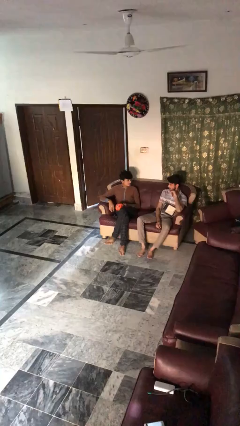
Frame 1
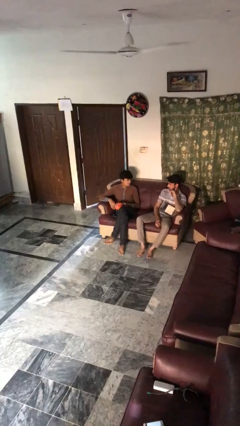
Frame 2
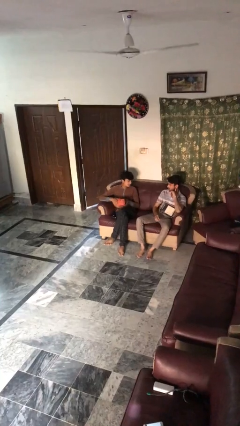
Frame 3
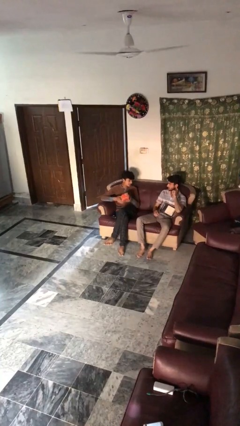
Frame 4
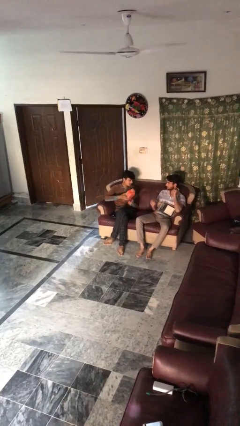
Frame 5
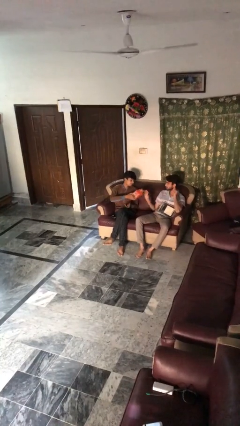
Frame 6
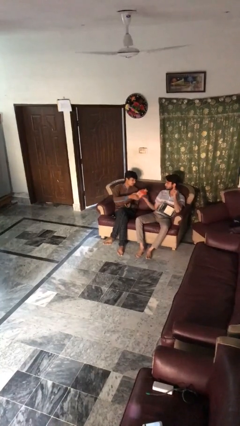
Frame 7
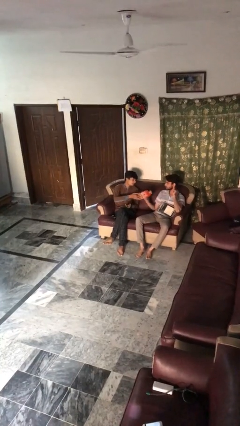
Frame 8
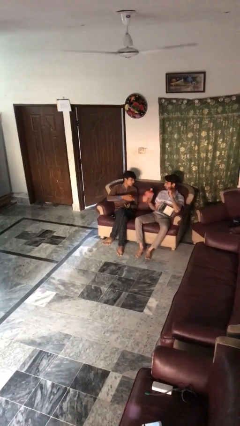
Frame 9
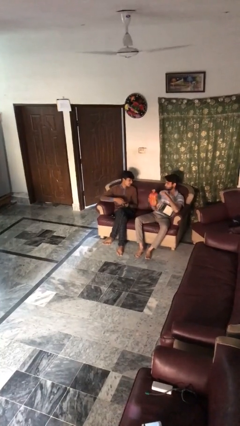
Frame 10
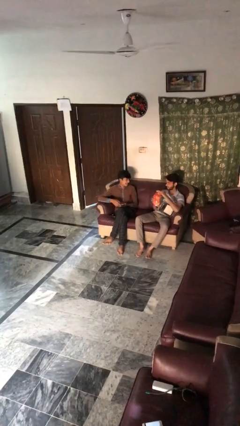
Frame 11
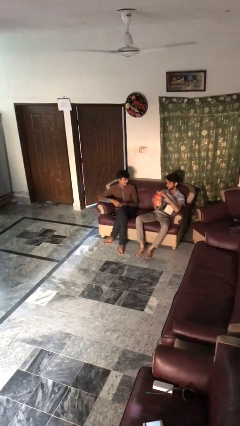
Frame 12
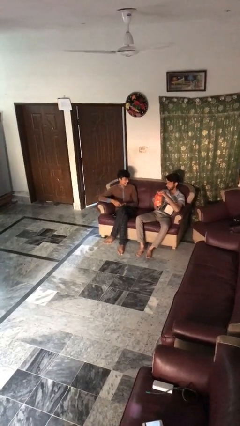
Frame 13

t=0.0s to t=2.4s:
person transfers object to person

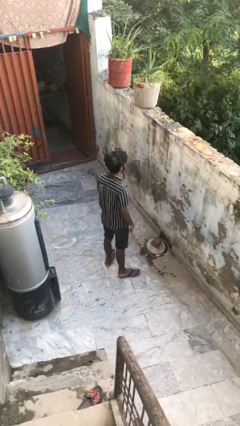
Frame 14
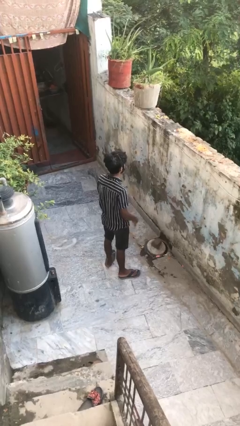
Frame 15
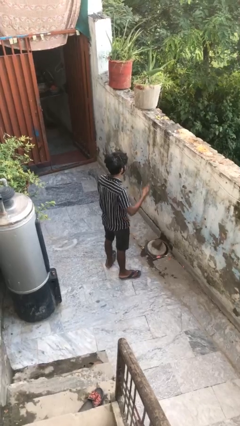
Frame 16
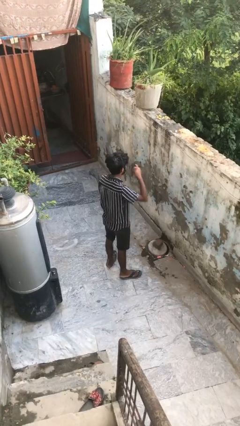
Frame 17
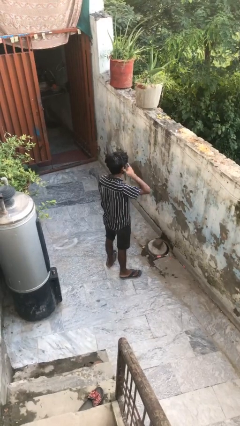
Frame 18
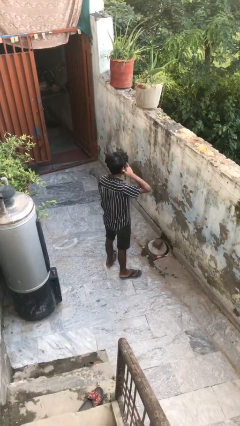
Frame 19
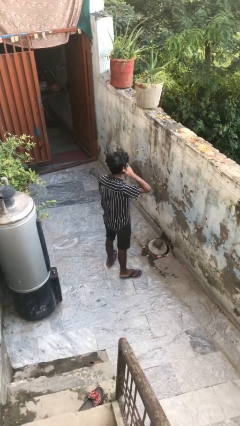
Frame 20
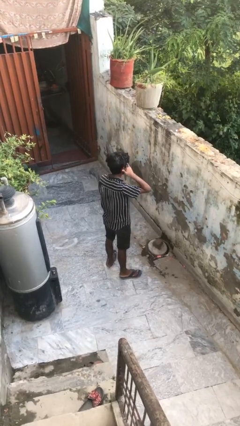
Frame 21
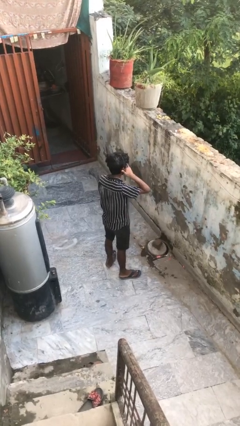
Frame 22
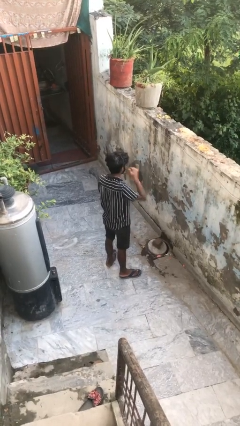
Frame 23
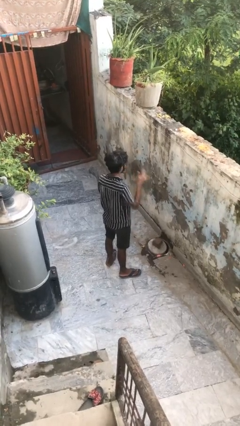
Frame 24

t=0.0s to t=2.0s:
person gestures call me

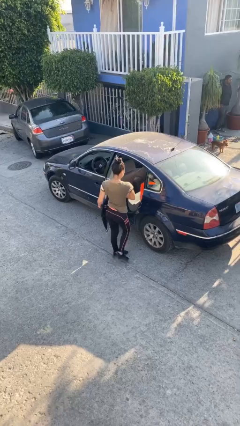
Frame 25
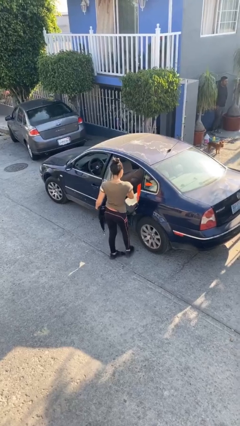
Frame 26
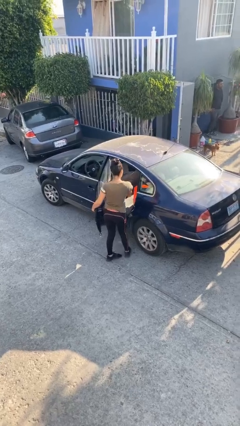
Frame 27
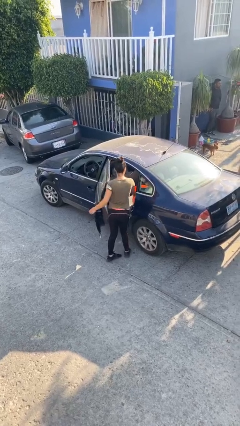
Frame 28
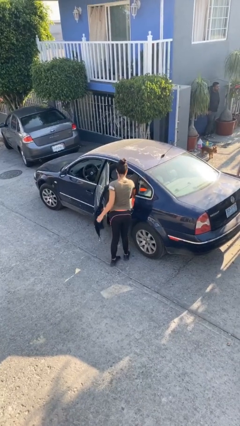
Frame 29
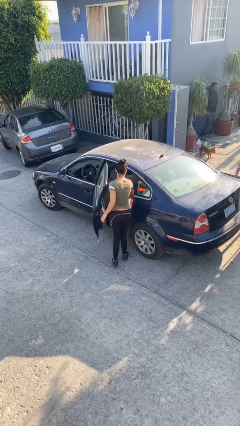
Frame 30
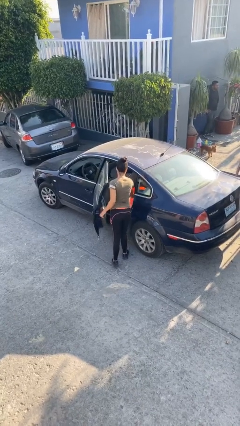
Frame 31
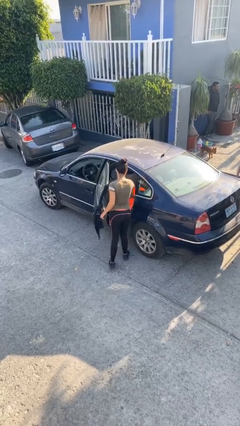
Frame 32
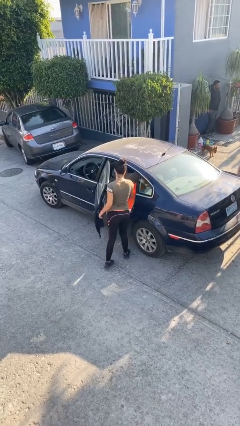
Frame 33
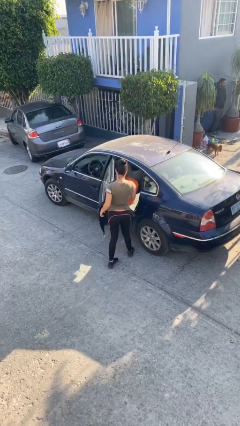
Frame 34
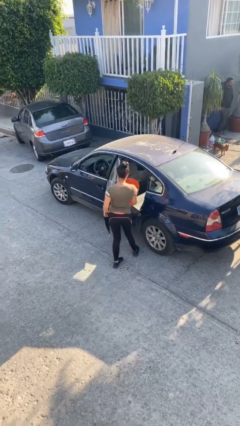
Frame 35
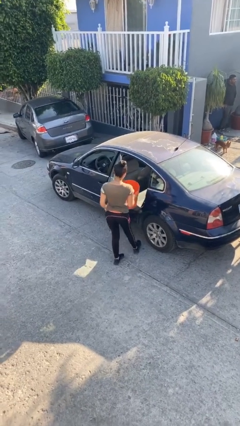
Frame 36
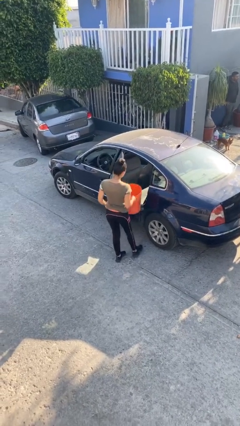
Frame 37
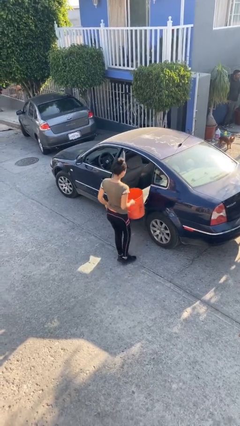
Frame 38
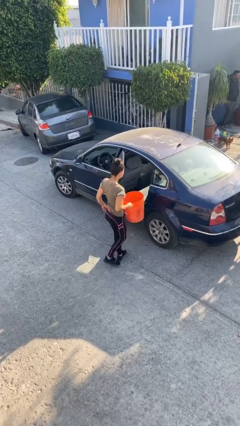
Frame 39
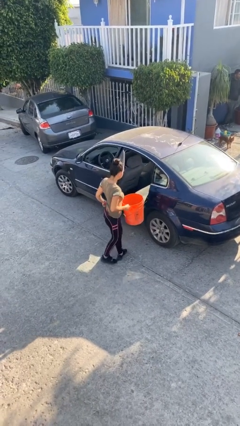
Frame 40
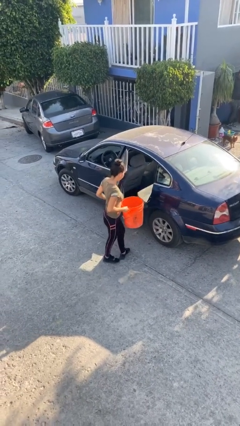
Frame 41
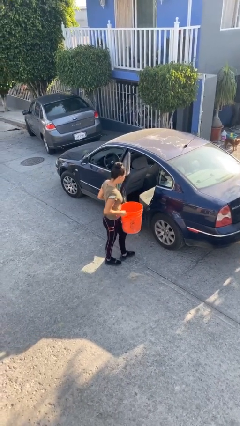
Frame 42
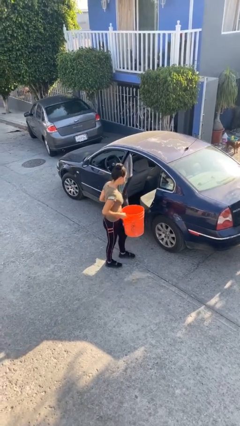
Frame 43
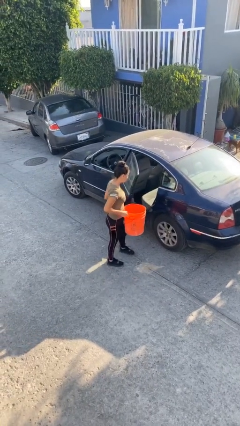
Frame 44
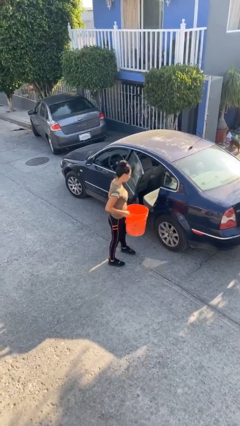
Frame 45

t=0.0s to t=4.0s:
person unloads car

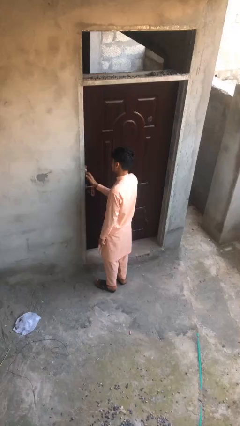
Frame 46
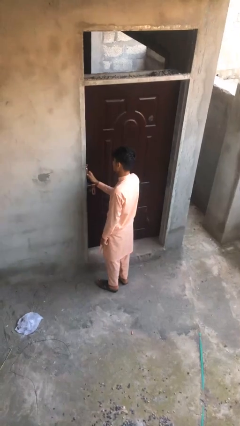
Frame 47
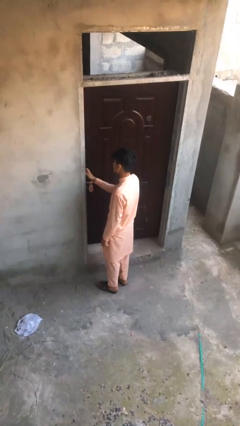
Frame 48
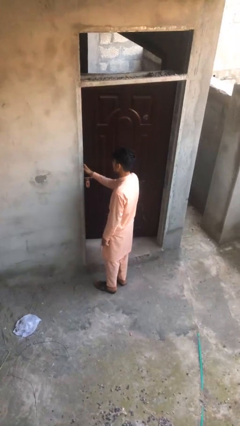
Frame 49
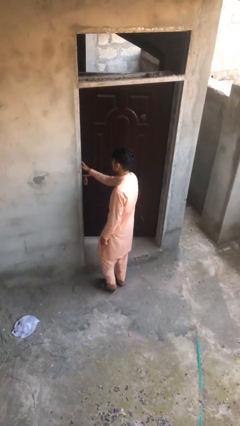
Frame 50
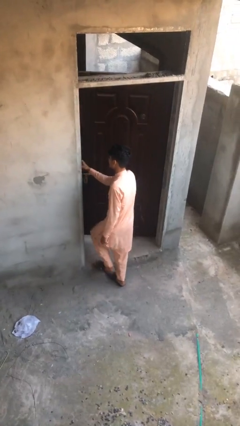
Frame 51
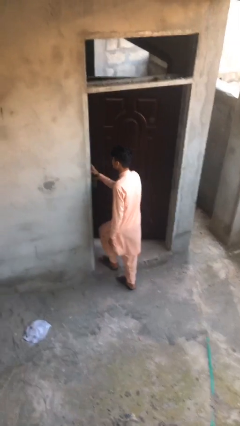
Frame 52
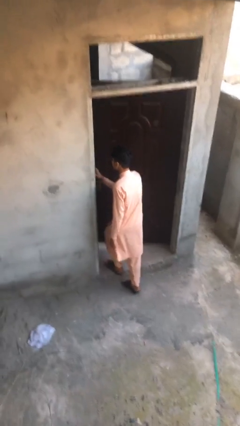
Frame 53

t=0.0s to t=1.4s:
person opens facility door

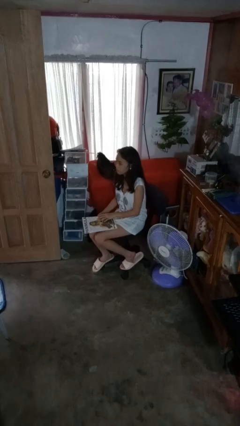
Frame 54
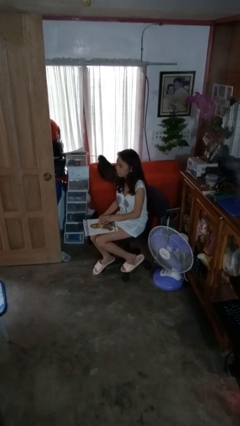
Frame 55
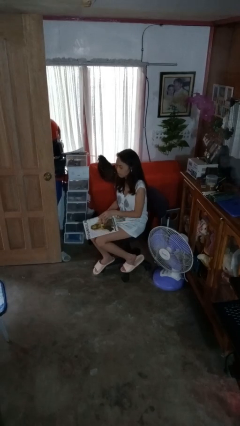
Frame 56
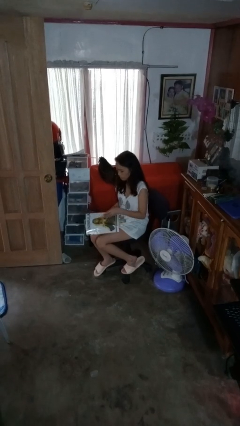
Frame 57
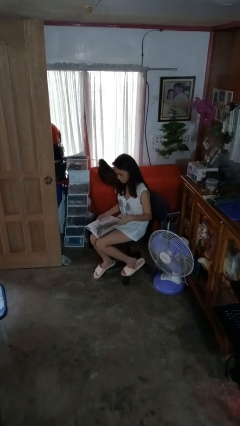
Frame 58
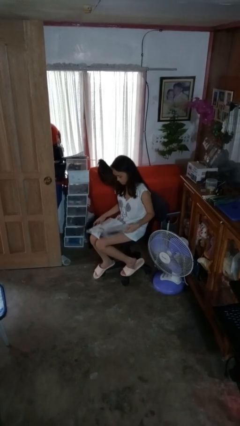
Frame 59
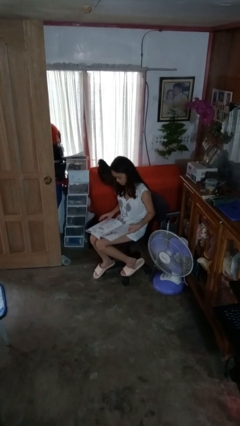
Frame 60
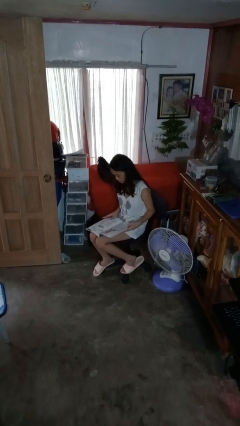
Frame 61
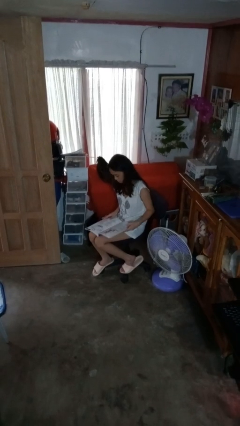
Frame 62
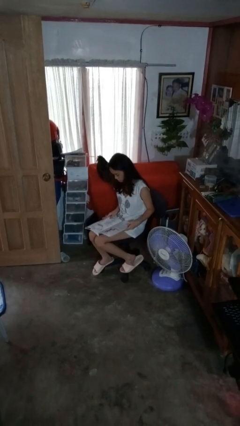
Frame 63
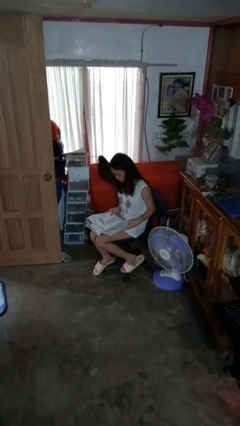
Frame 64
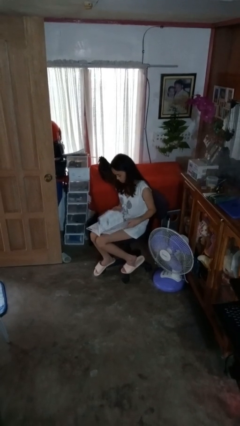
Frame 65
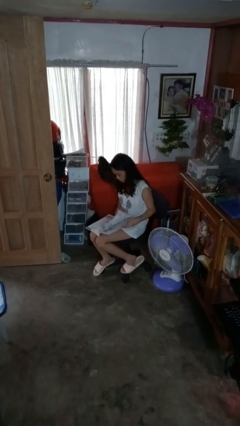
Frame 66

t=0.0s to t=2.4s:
person reads magazine

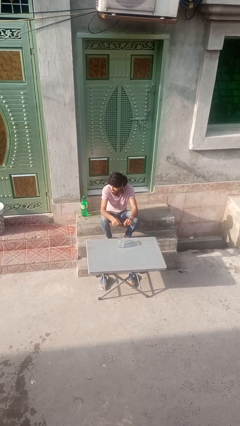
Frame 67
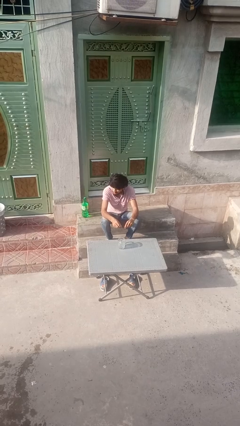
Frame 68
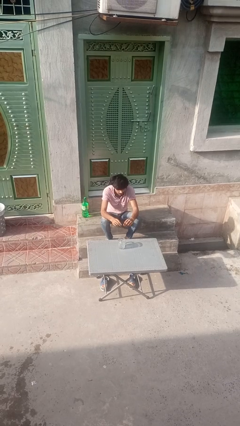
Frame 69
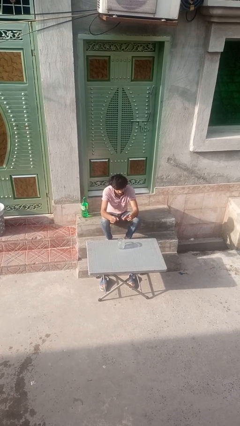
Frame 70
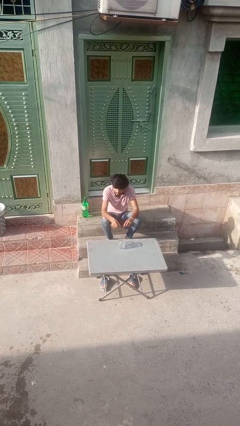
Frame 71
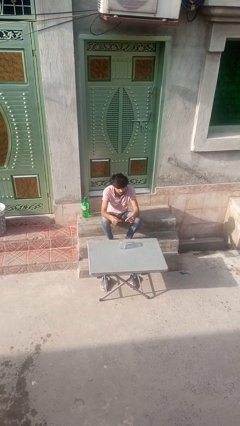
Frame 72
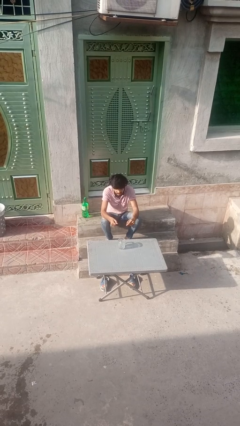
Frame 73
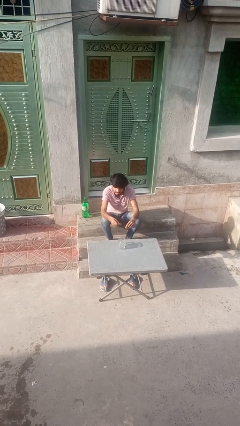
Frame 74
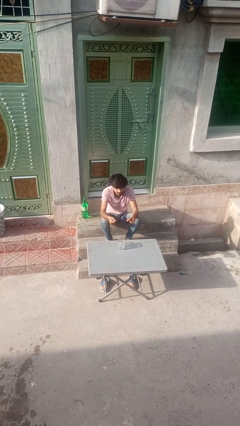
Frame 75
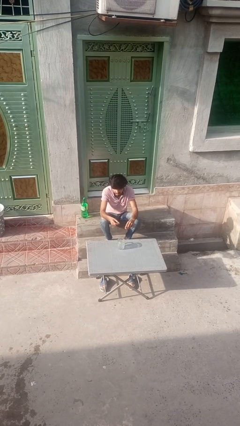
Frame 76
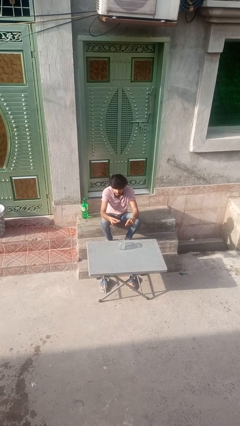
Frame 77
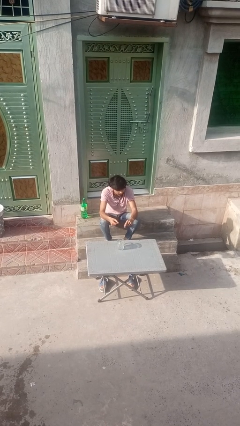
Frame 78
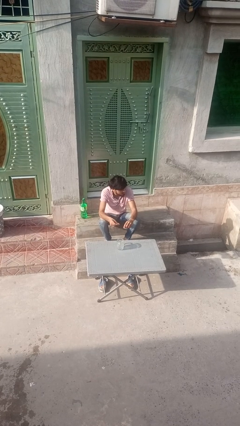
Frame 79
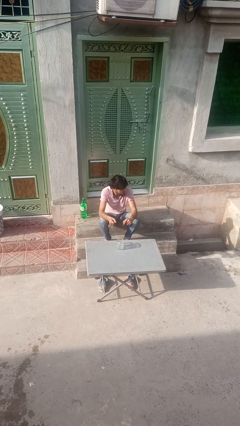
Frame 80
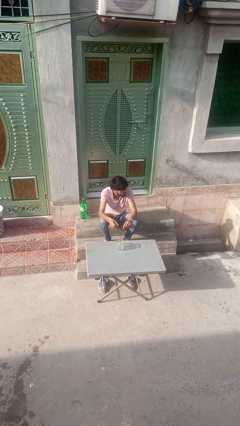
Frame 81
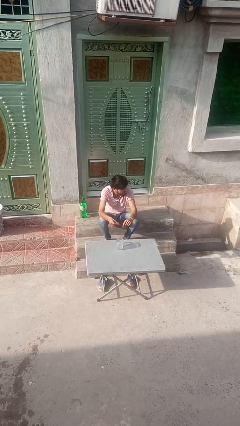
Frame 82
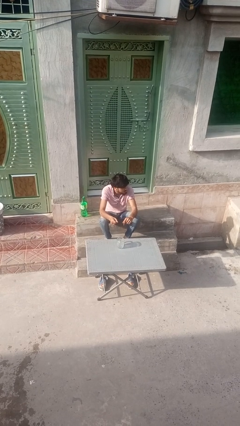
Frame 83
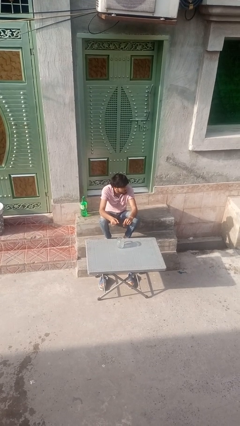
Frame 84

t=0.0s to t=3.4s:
person snaps fingers

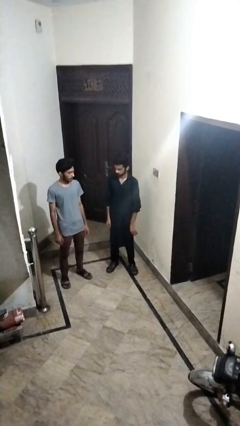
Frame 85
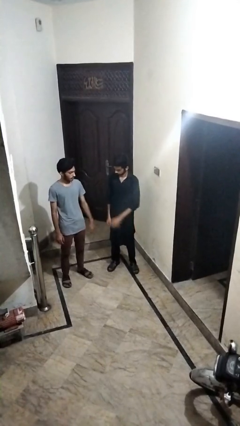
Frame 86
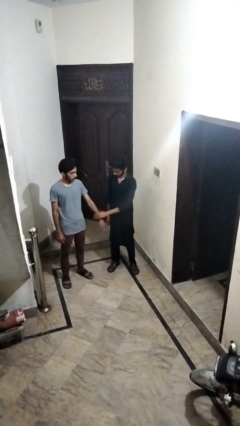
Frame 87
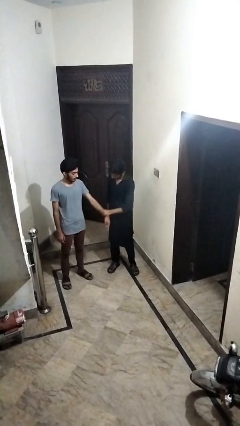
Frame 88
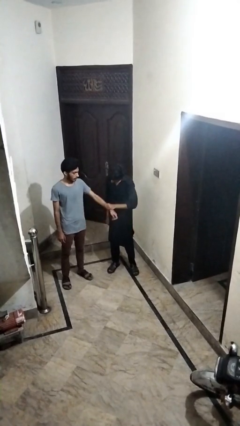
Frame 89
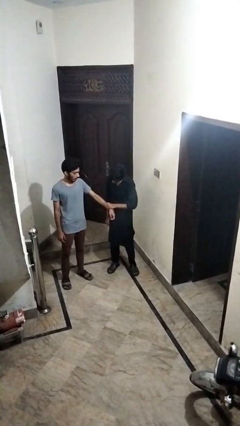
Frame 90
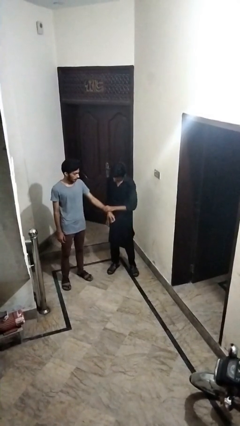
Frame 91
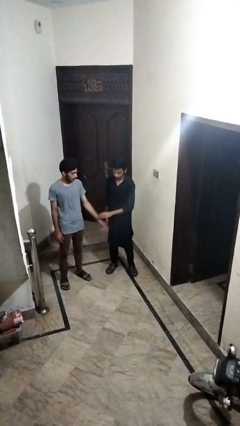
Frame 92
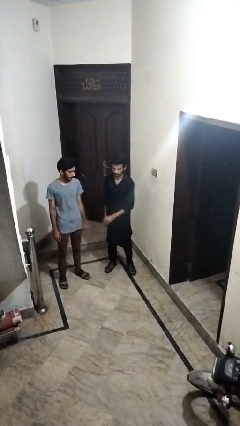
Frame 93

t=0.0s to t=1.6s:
person grabs person by forearm
